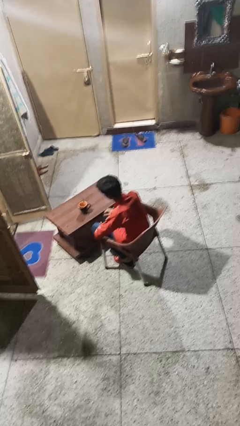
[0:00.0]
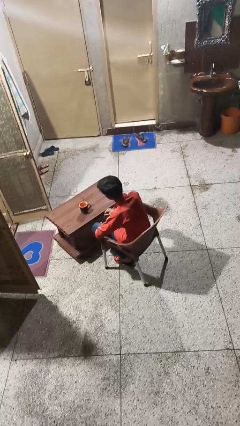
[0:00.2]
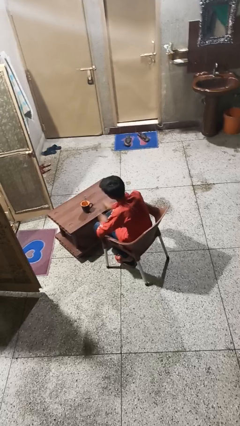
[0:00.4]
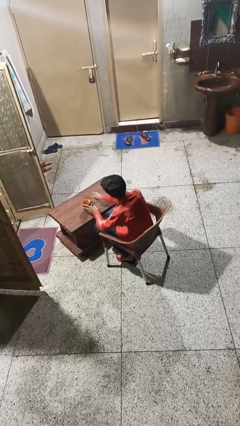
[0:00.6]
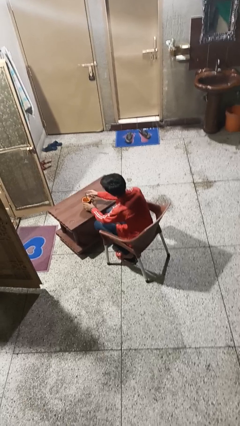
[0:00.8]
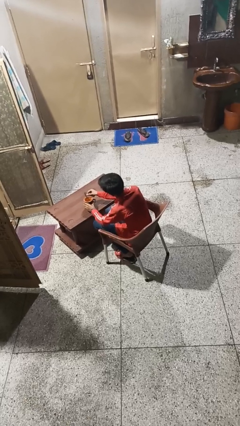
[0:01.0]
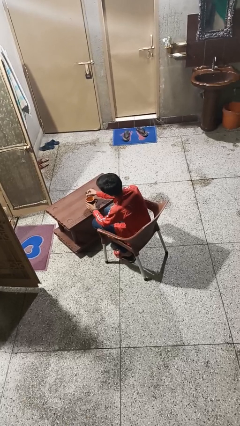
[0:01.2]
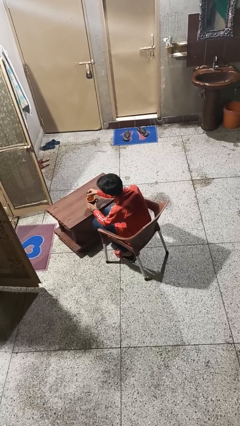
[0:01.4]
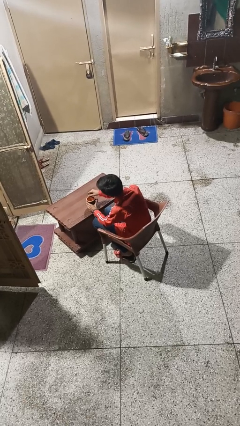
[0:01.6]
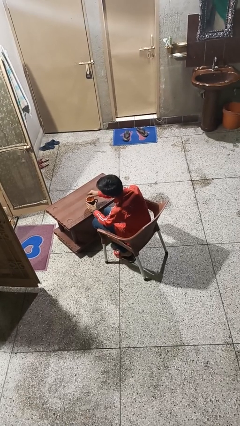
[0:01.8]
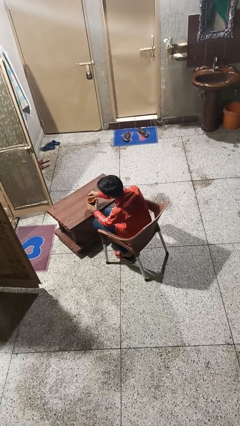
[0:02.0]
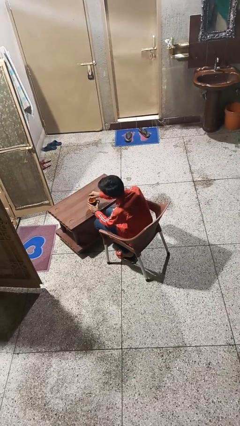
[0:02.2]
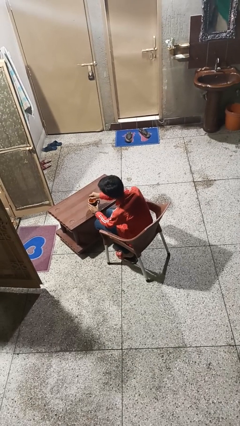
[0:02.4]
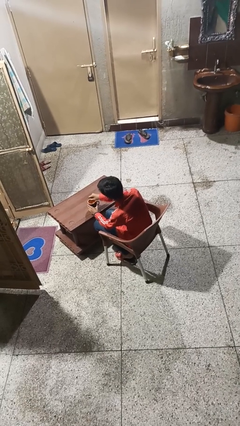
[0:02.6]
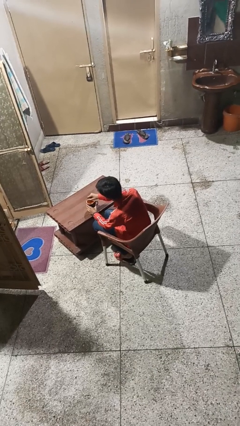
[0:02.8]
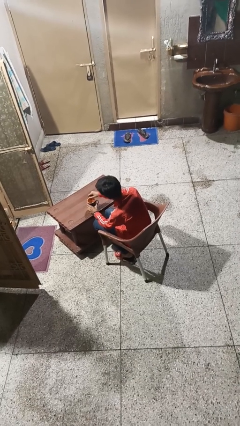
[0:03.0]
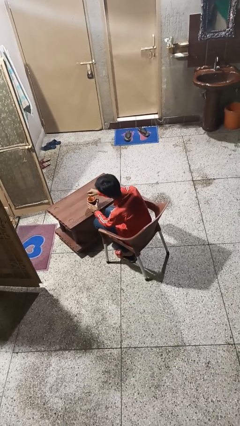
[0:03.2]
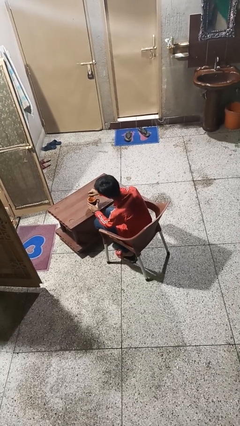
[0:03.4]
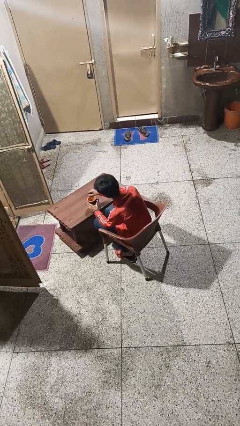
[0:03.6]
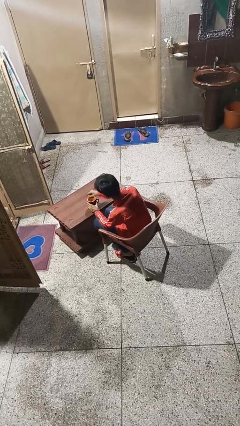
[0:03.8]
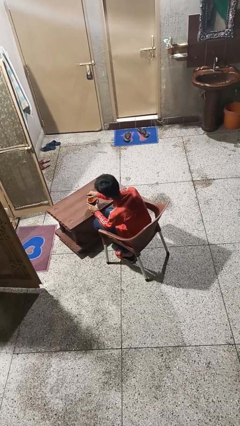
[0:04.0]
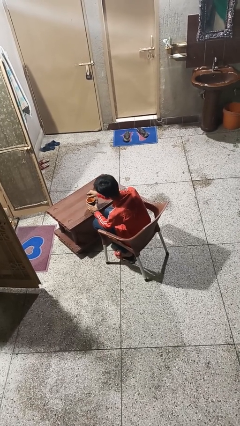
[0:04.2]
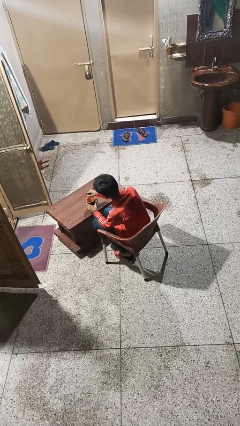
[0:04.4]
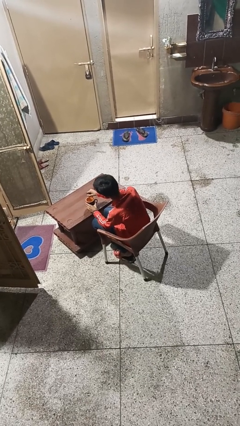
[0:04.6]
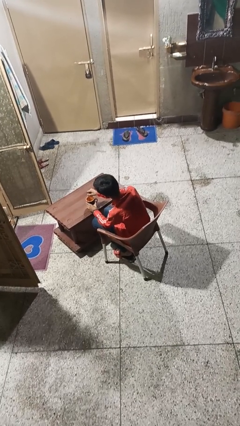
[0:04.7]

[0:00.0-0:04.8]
person stirs mug

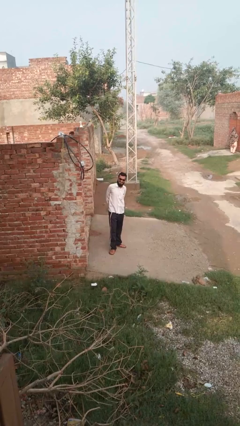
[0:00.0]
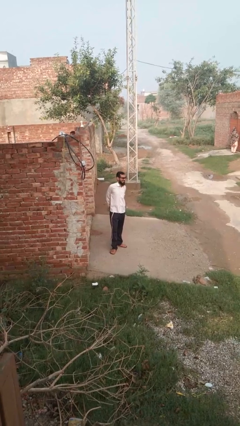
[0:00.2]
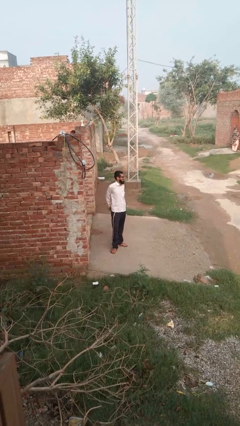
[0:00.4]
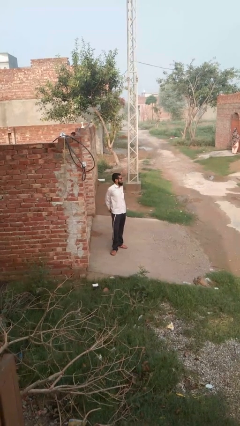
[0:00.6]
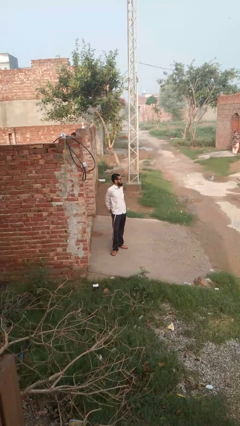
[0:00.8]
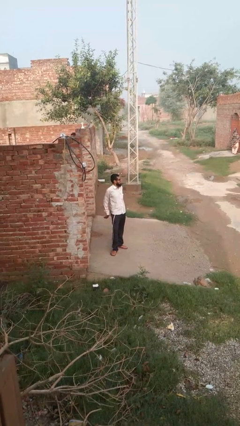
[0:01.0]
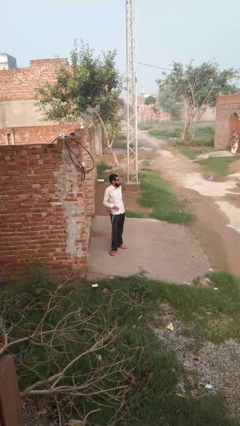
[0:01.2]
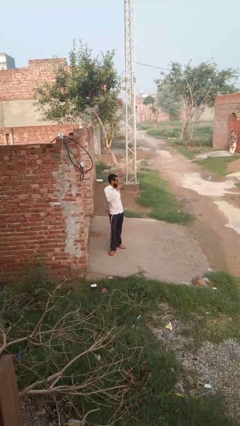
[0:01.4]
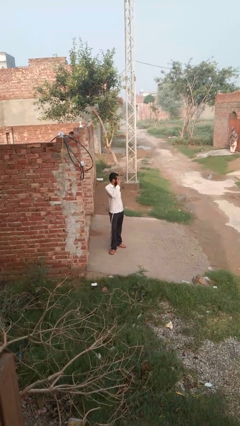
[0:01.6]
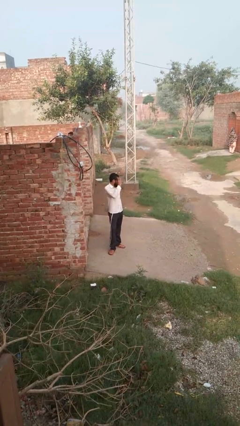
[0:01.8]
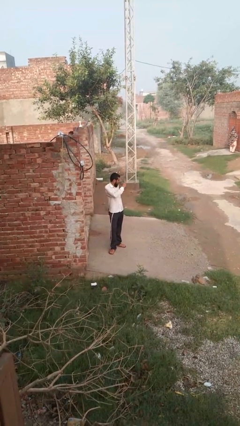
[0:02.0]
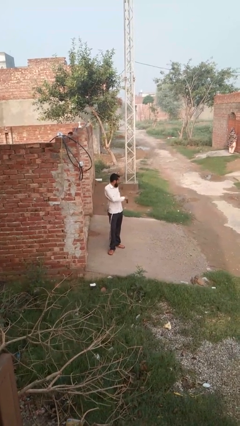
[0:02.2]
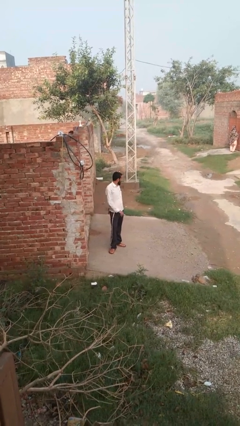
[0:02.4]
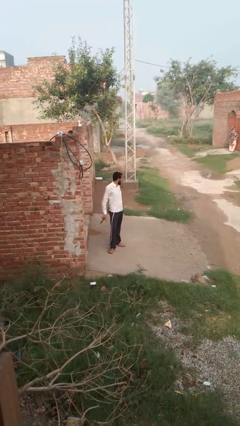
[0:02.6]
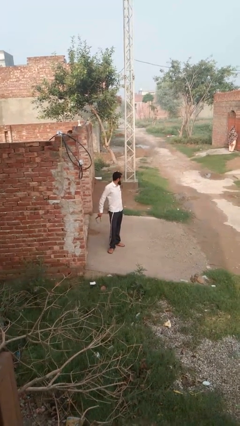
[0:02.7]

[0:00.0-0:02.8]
person takes off glasses

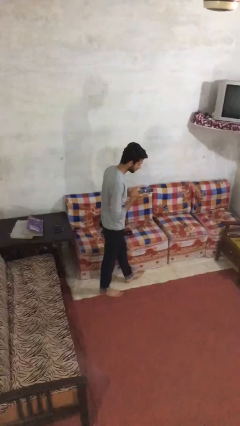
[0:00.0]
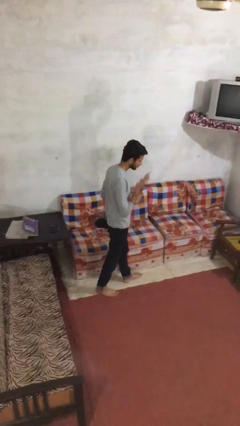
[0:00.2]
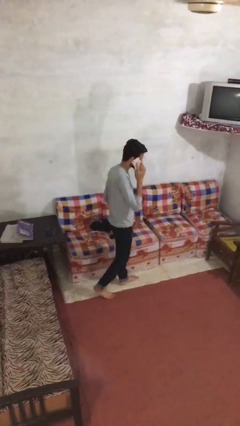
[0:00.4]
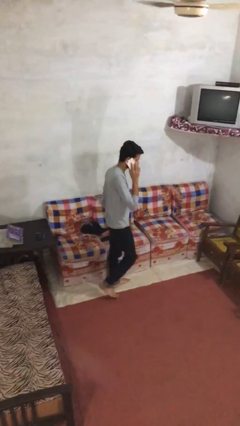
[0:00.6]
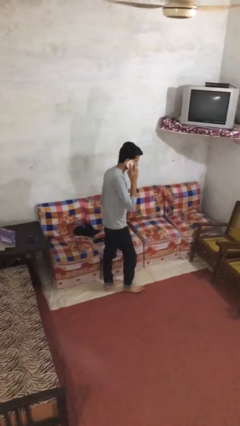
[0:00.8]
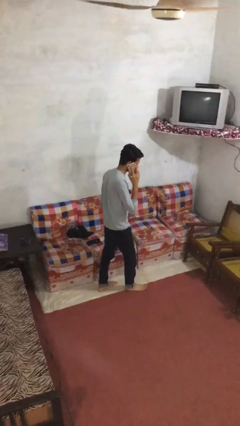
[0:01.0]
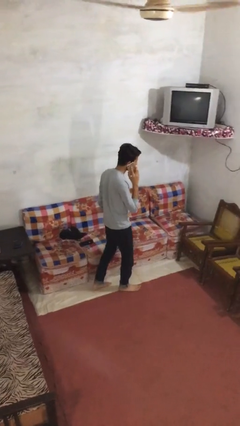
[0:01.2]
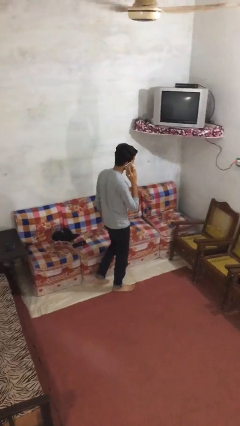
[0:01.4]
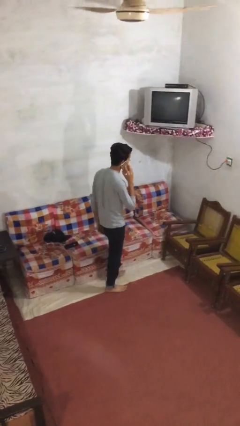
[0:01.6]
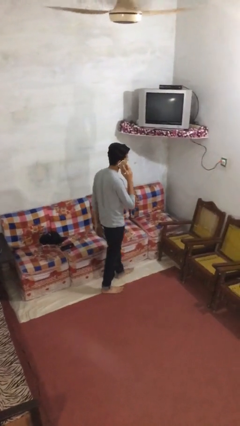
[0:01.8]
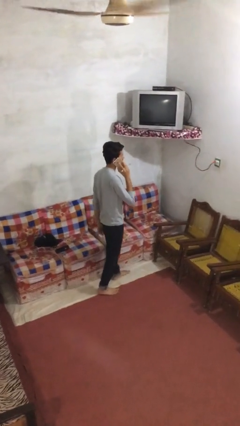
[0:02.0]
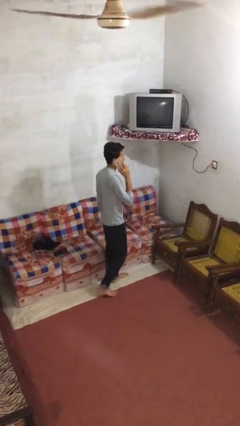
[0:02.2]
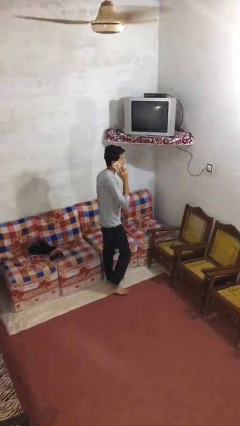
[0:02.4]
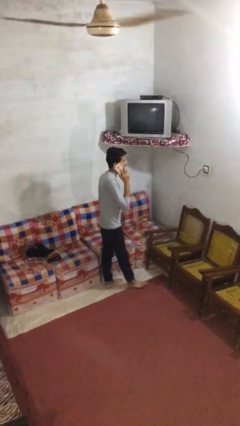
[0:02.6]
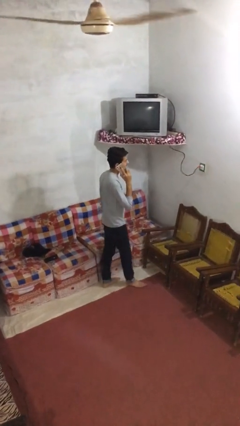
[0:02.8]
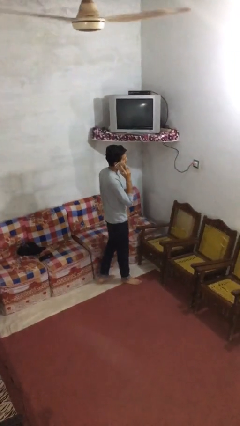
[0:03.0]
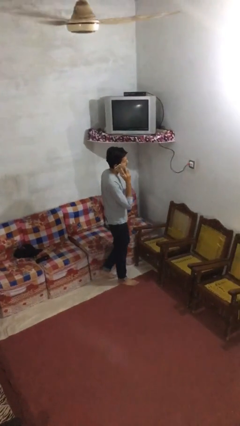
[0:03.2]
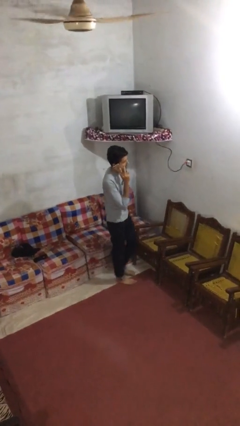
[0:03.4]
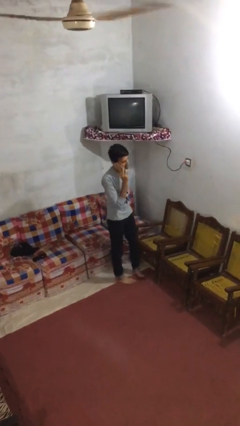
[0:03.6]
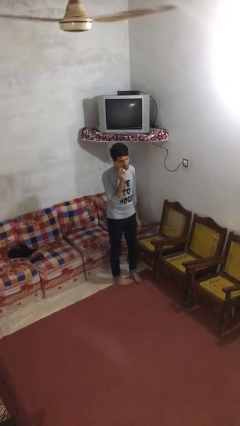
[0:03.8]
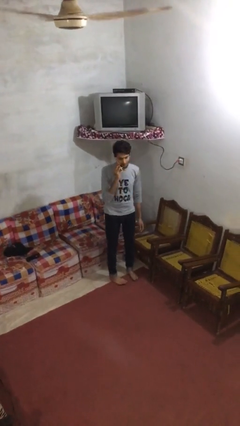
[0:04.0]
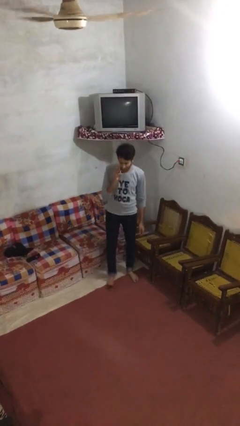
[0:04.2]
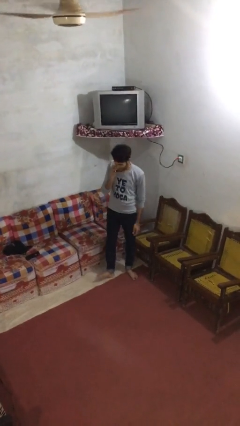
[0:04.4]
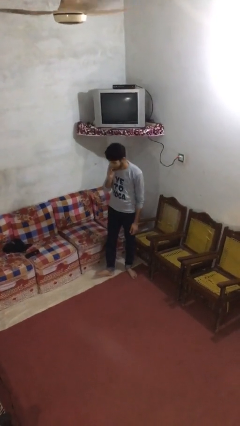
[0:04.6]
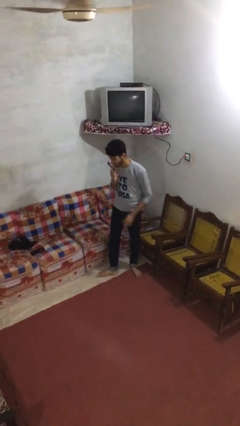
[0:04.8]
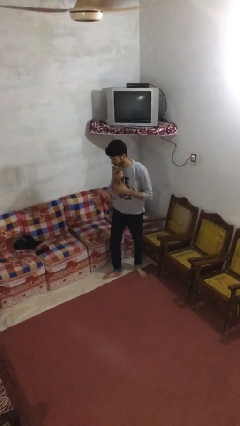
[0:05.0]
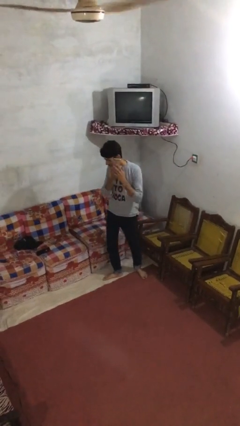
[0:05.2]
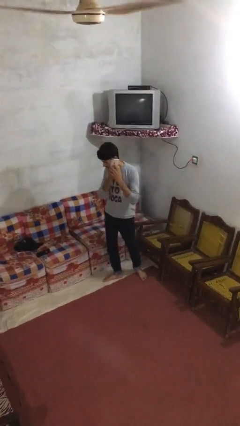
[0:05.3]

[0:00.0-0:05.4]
person talks on phone

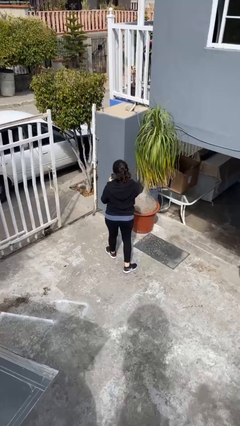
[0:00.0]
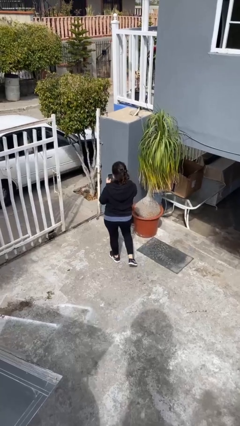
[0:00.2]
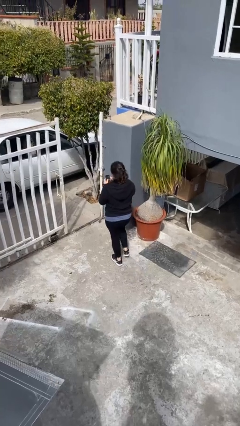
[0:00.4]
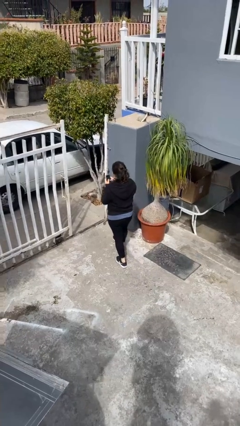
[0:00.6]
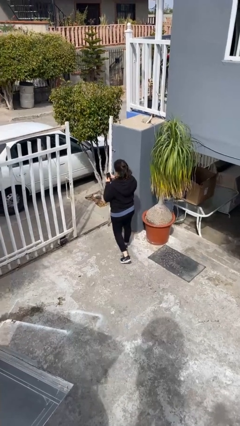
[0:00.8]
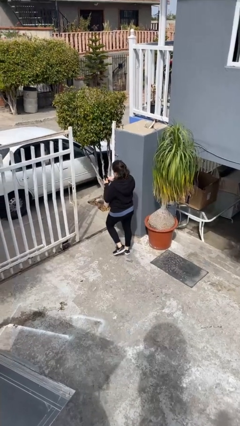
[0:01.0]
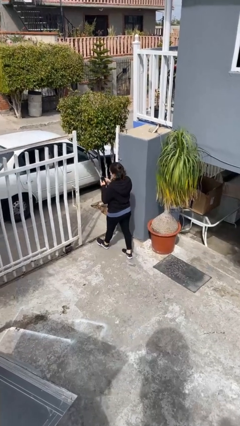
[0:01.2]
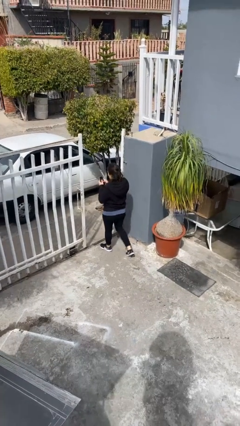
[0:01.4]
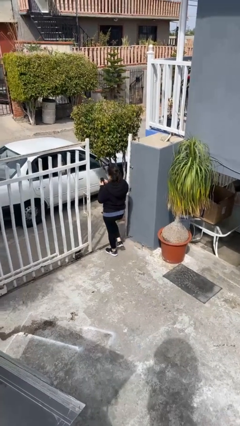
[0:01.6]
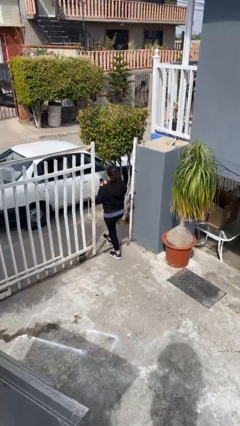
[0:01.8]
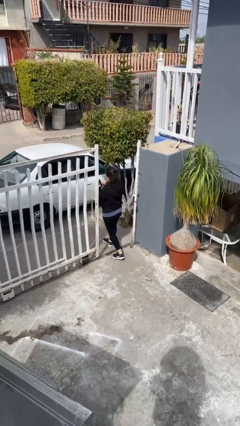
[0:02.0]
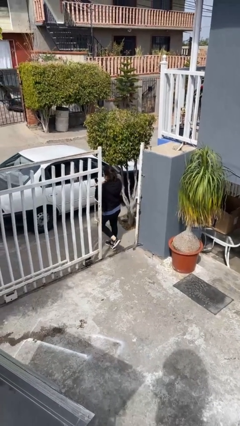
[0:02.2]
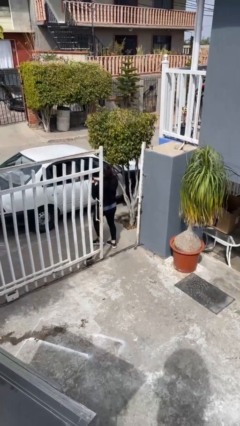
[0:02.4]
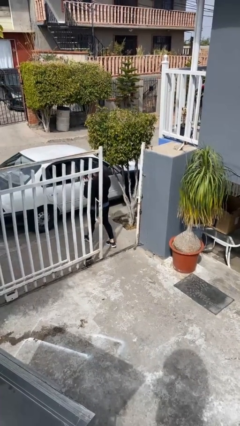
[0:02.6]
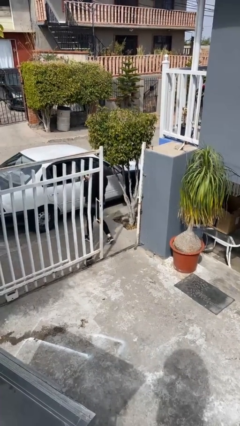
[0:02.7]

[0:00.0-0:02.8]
person exits scene through structure

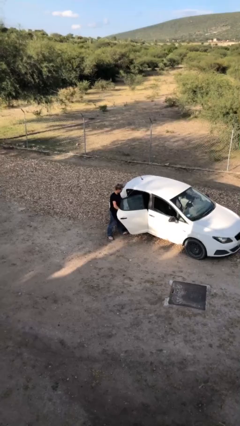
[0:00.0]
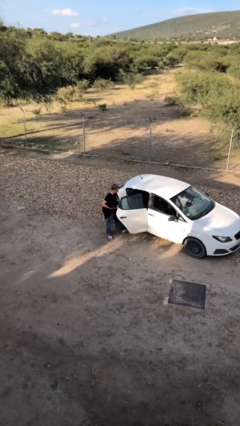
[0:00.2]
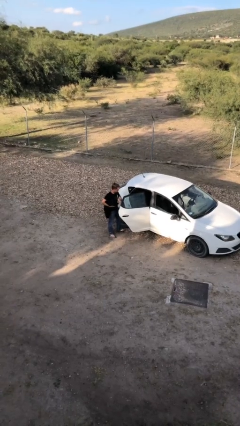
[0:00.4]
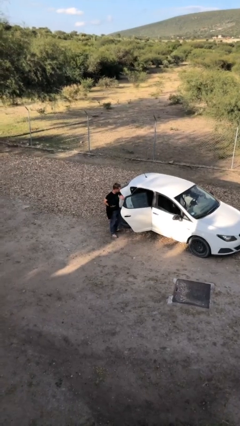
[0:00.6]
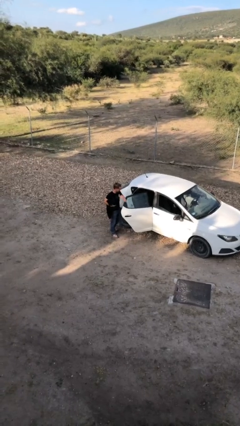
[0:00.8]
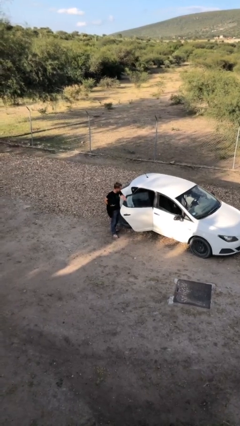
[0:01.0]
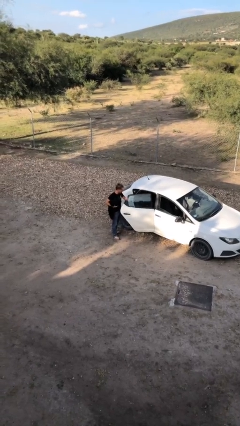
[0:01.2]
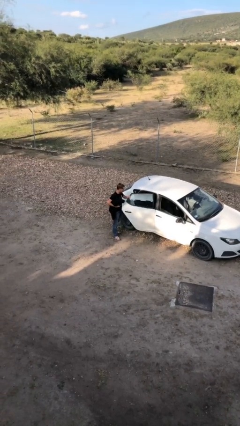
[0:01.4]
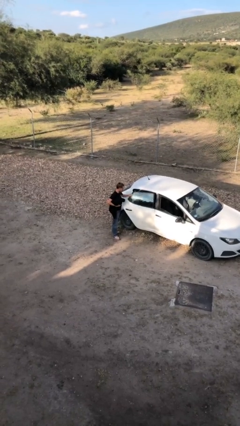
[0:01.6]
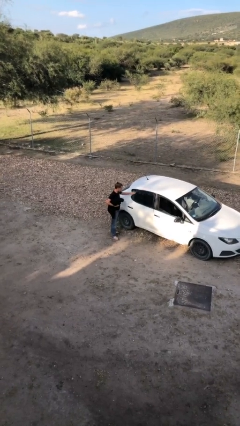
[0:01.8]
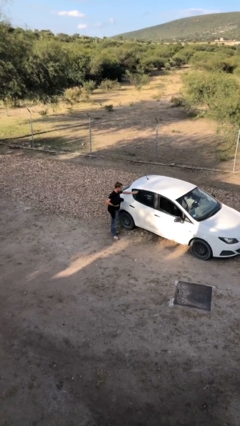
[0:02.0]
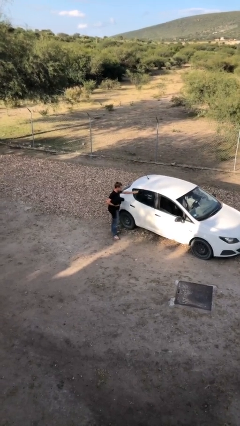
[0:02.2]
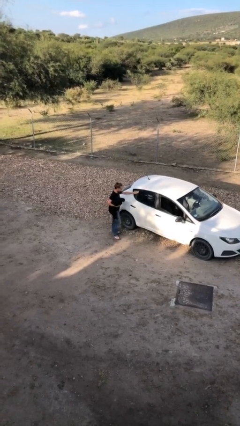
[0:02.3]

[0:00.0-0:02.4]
person closes car door
